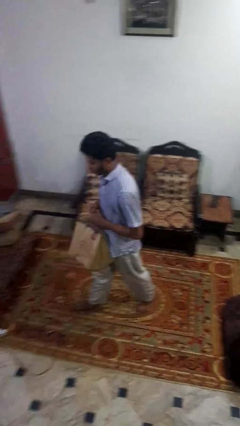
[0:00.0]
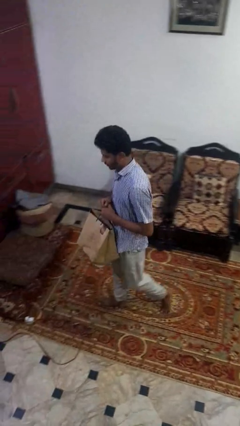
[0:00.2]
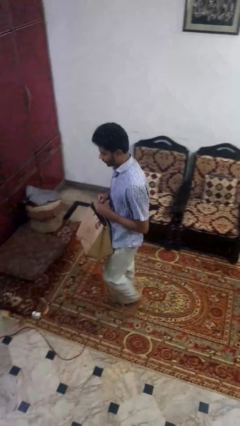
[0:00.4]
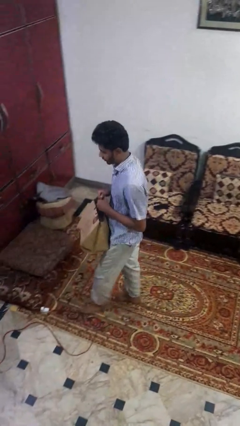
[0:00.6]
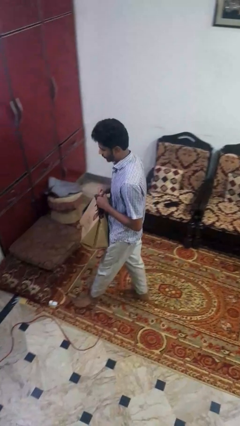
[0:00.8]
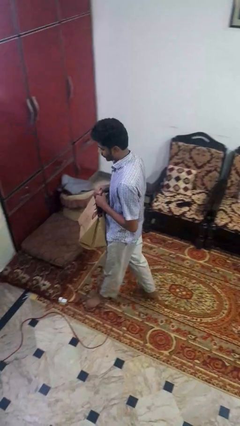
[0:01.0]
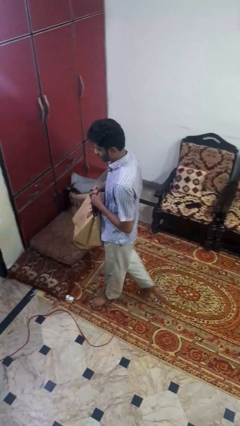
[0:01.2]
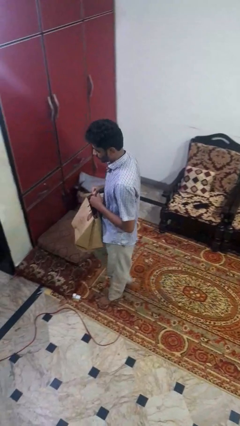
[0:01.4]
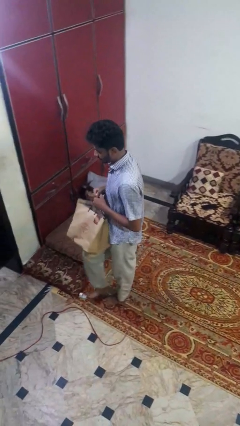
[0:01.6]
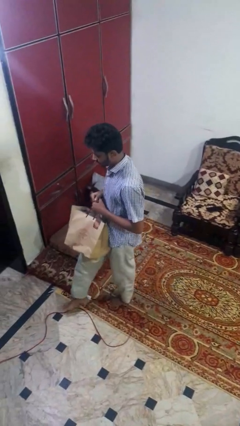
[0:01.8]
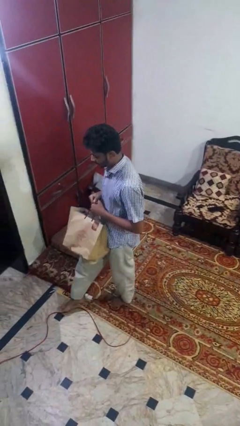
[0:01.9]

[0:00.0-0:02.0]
person carries groceries

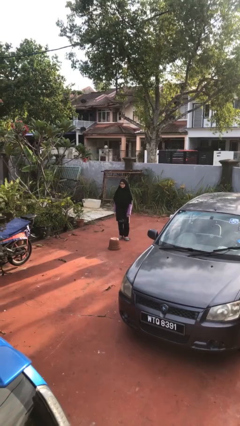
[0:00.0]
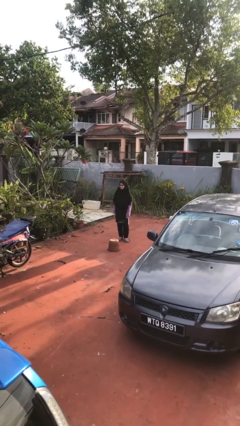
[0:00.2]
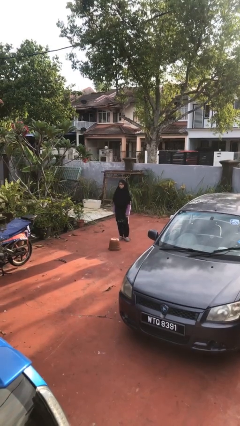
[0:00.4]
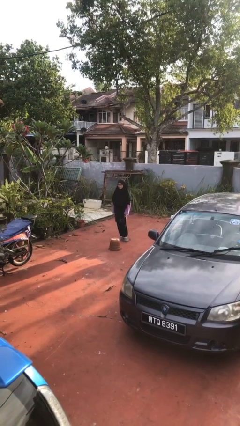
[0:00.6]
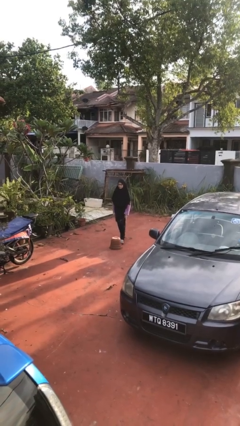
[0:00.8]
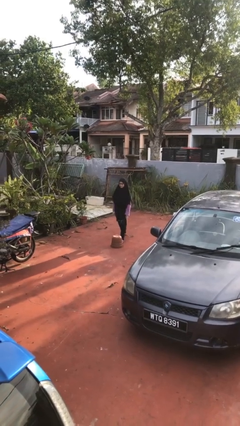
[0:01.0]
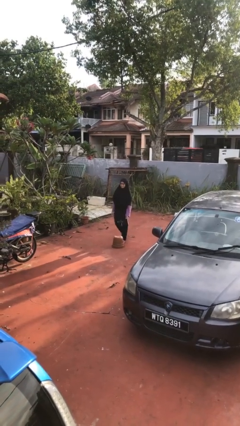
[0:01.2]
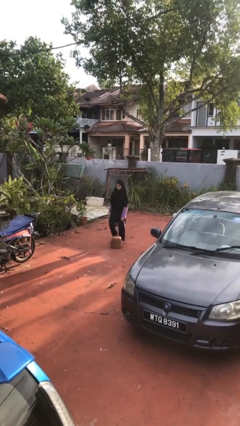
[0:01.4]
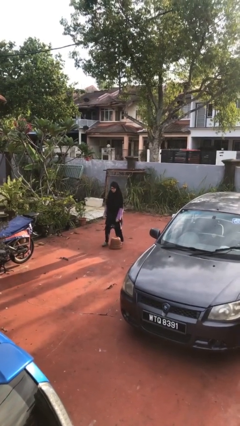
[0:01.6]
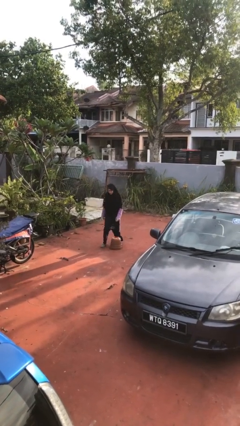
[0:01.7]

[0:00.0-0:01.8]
person trips on object on floor

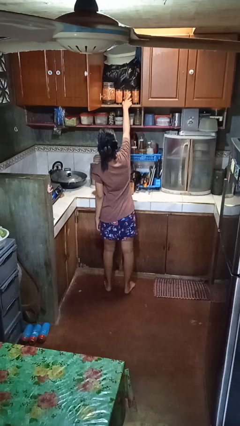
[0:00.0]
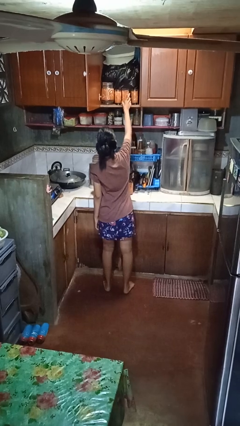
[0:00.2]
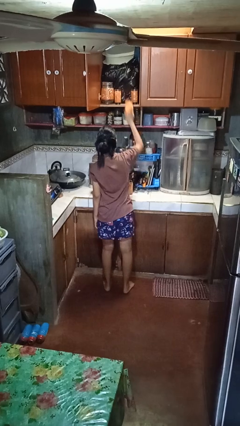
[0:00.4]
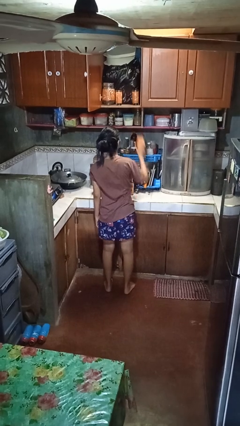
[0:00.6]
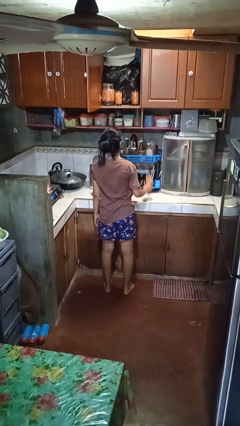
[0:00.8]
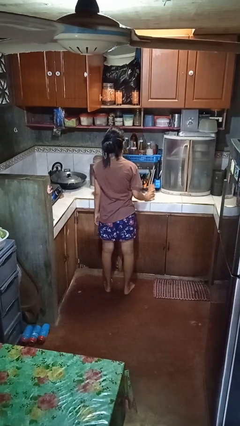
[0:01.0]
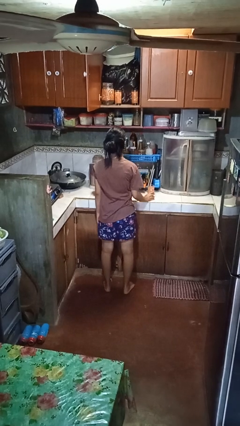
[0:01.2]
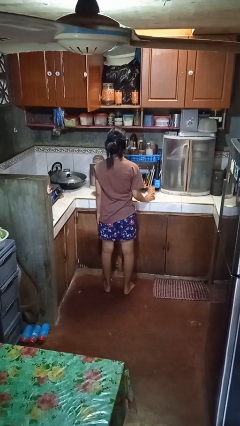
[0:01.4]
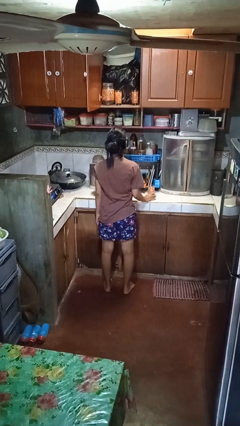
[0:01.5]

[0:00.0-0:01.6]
person takes object from cabinet

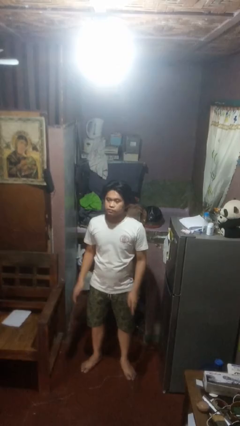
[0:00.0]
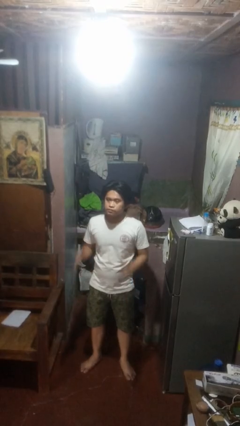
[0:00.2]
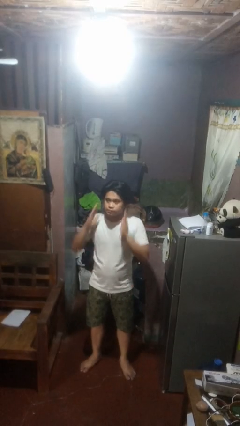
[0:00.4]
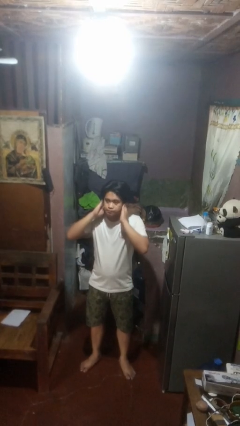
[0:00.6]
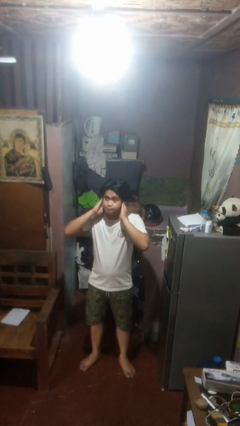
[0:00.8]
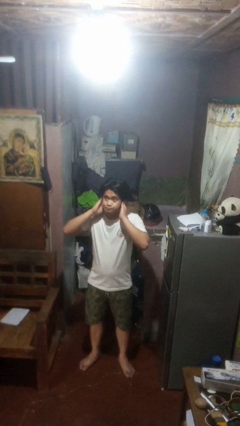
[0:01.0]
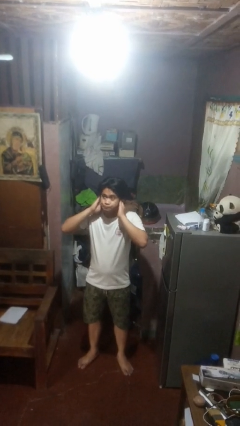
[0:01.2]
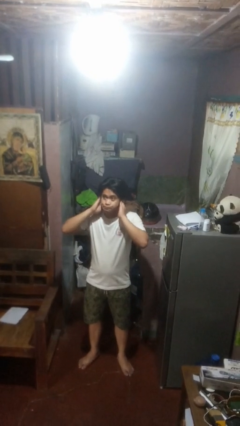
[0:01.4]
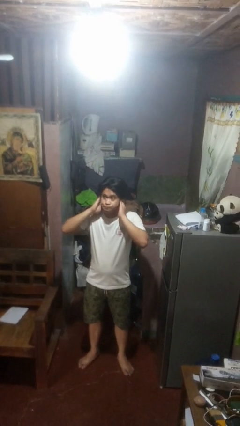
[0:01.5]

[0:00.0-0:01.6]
person puts fingers in ear

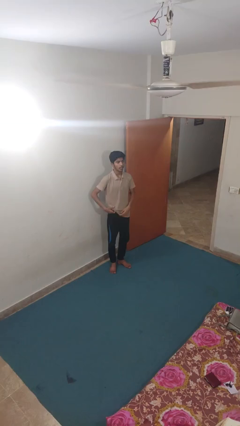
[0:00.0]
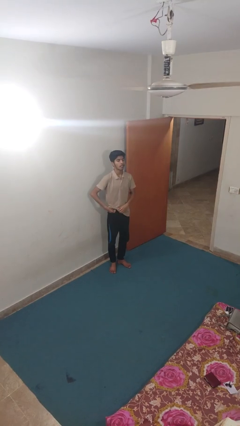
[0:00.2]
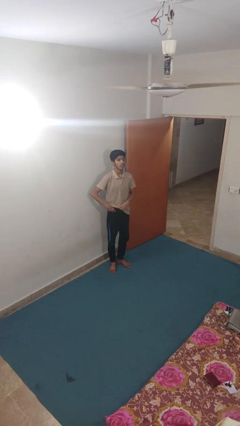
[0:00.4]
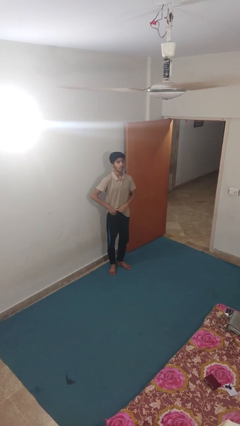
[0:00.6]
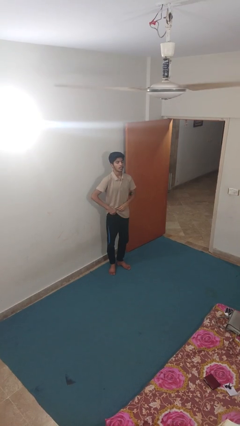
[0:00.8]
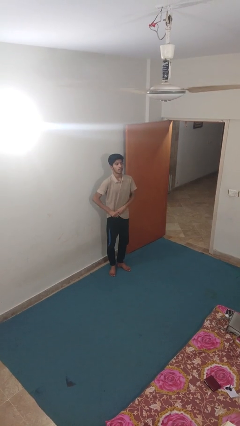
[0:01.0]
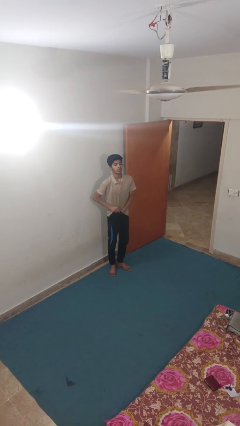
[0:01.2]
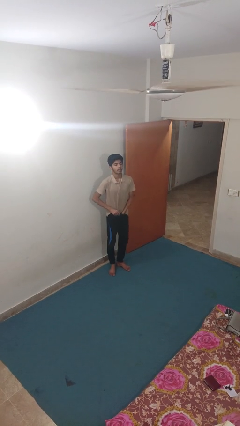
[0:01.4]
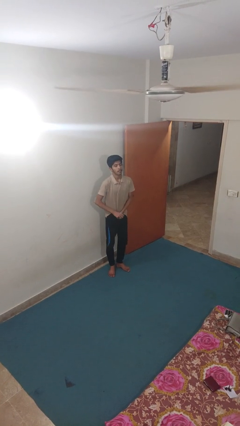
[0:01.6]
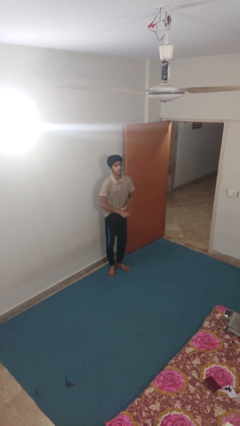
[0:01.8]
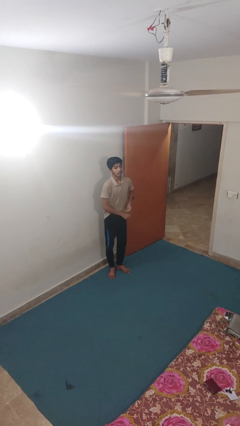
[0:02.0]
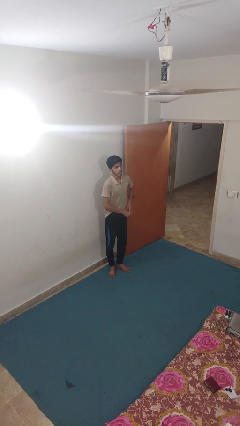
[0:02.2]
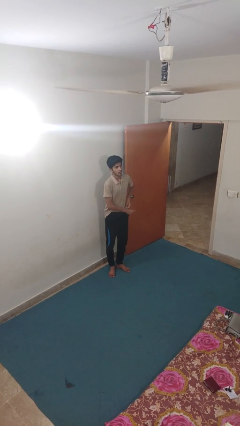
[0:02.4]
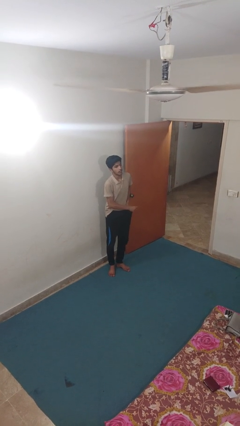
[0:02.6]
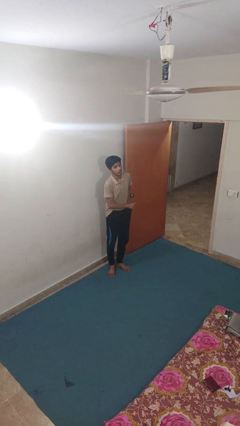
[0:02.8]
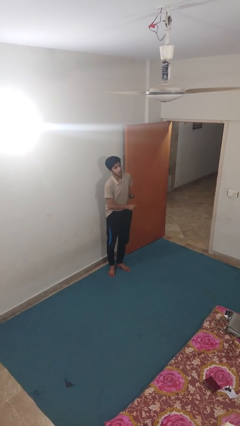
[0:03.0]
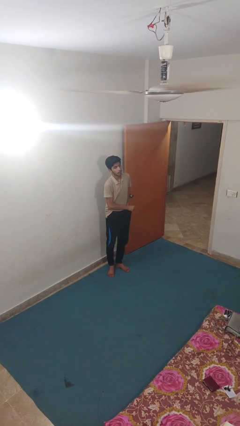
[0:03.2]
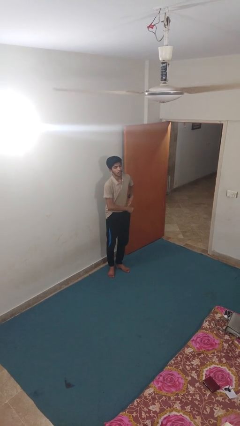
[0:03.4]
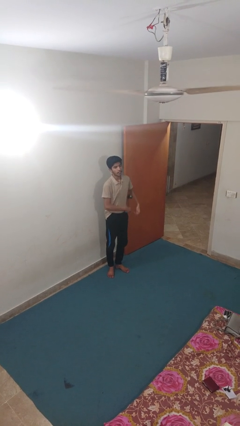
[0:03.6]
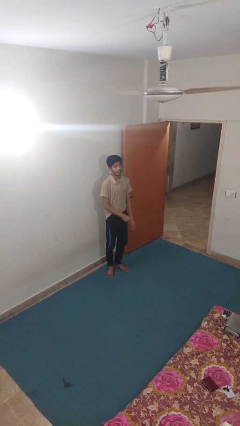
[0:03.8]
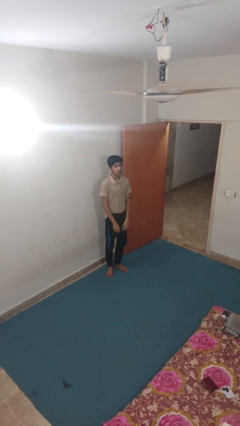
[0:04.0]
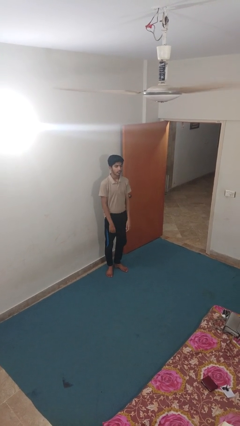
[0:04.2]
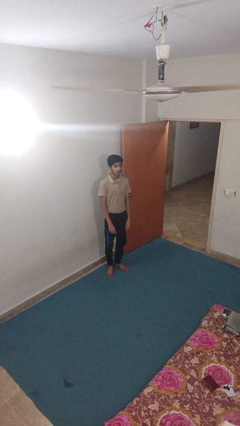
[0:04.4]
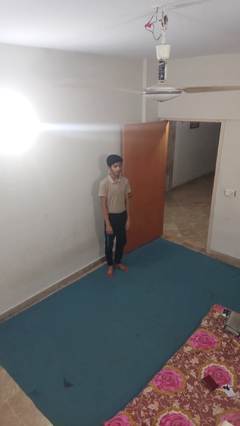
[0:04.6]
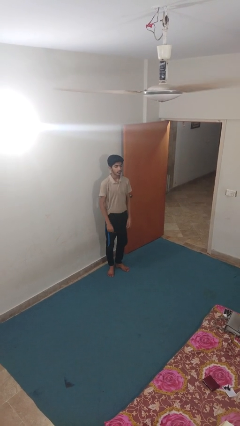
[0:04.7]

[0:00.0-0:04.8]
person tucks in shirt

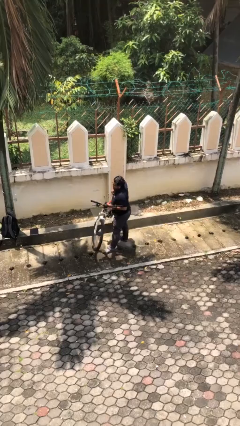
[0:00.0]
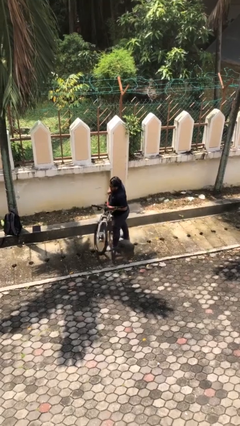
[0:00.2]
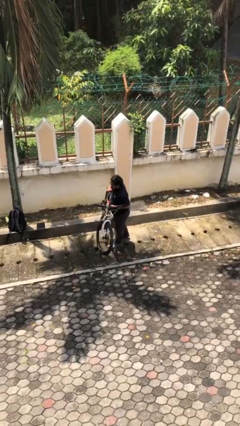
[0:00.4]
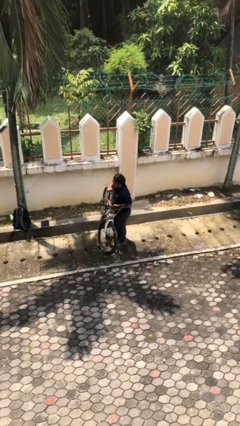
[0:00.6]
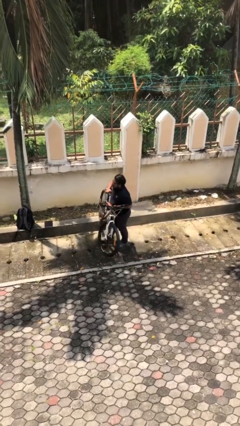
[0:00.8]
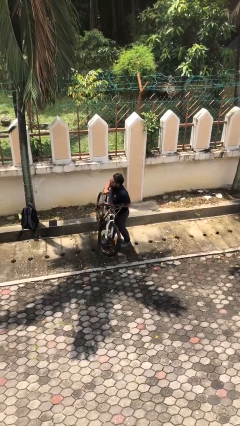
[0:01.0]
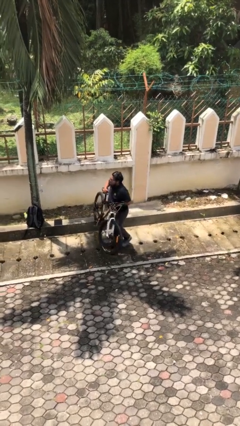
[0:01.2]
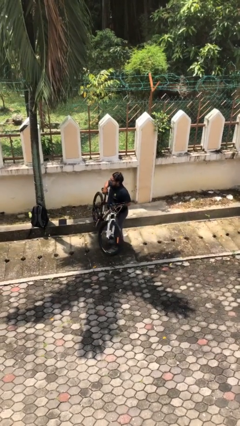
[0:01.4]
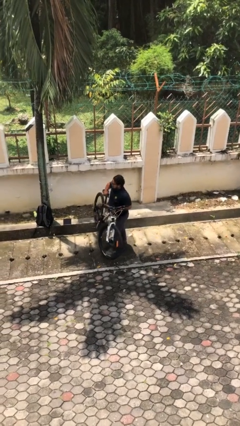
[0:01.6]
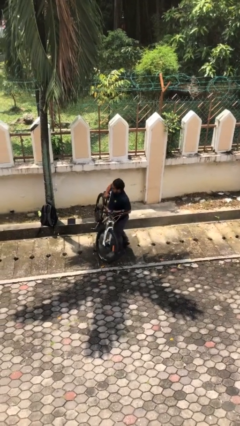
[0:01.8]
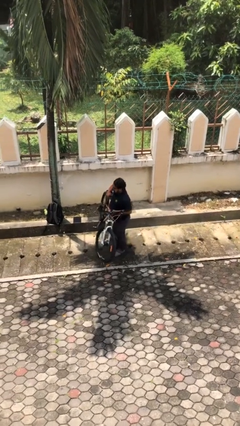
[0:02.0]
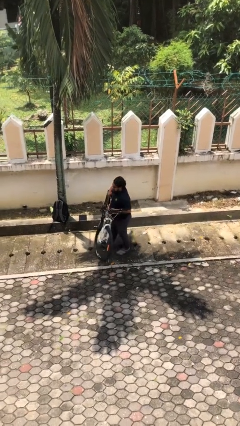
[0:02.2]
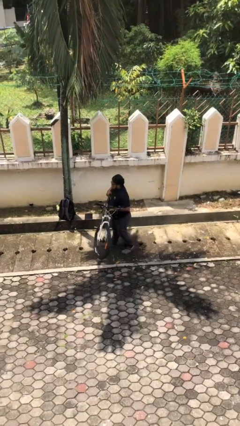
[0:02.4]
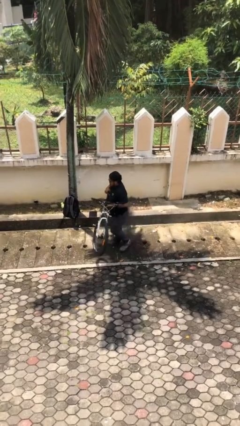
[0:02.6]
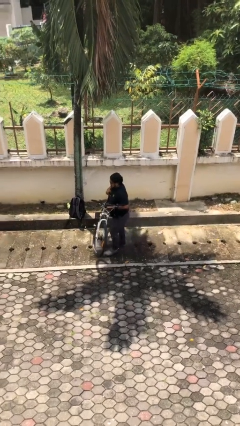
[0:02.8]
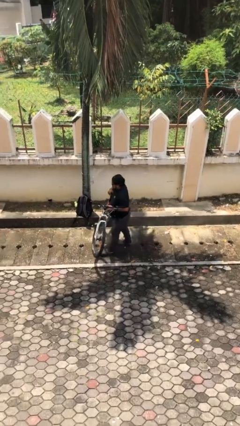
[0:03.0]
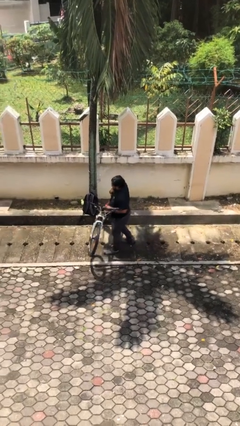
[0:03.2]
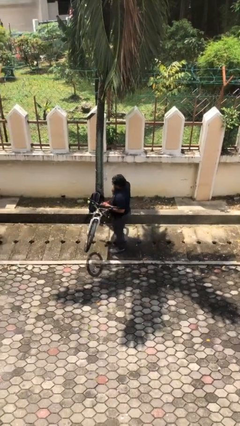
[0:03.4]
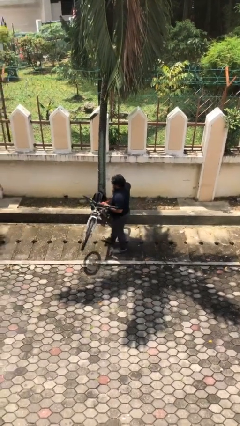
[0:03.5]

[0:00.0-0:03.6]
person carries heavy object

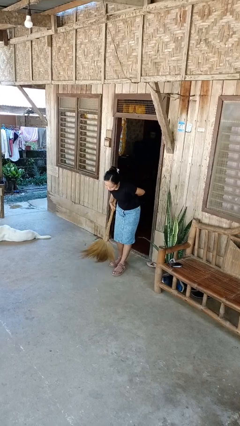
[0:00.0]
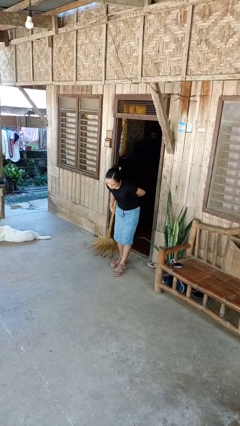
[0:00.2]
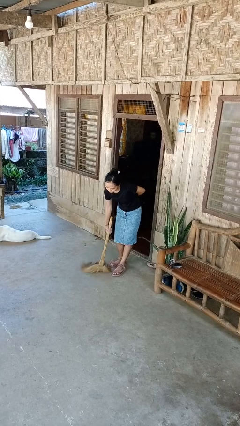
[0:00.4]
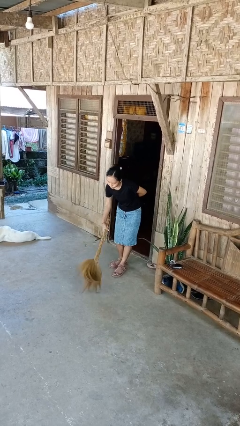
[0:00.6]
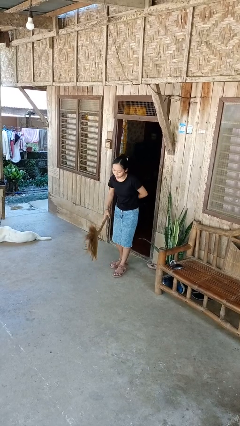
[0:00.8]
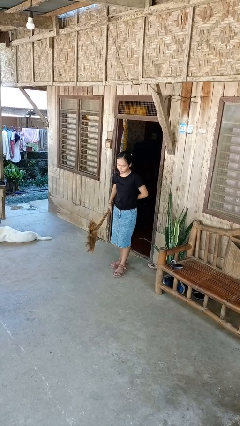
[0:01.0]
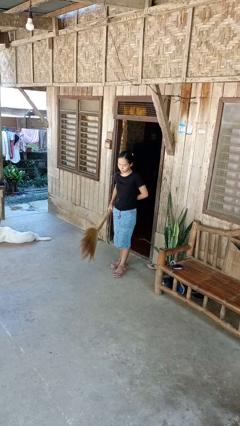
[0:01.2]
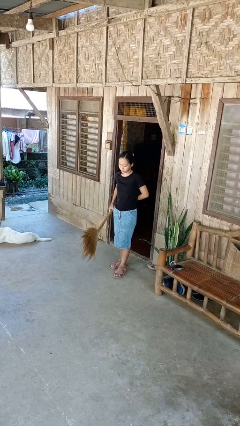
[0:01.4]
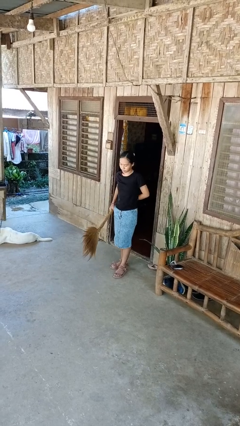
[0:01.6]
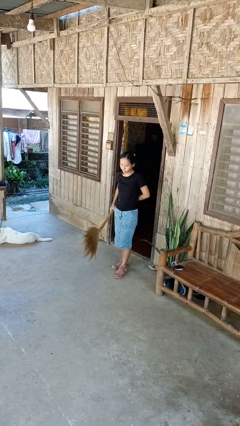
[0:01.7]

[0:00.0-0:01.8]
person sweeps floor
